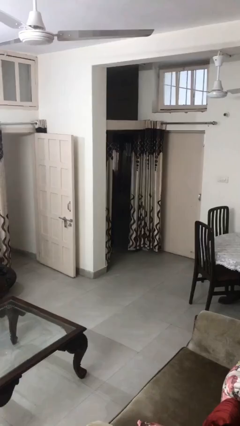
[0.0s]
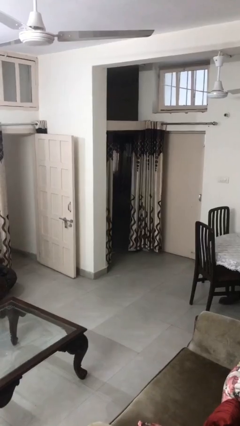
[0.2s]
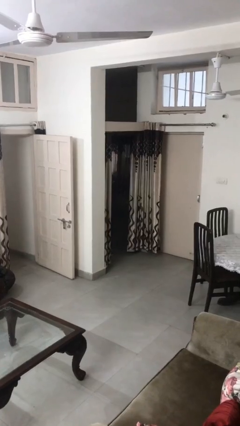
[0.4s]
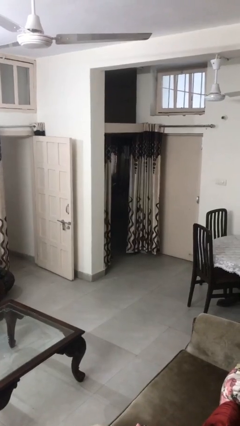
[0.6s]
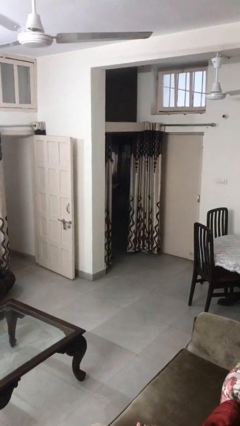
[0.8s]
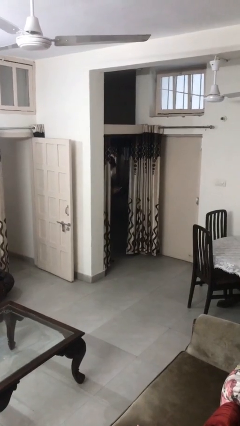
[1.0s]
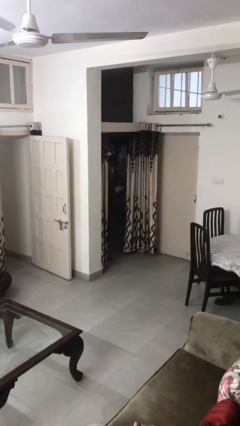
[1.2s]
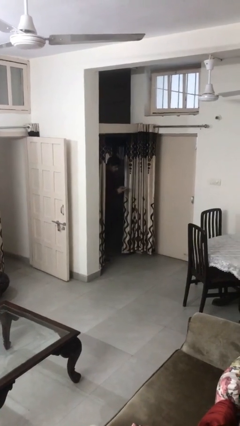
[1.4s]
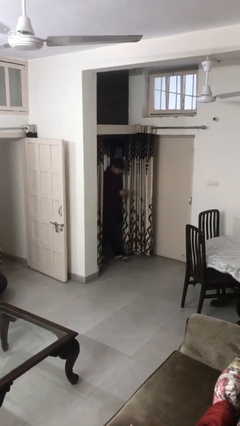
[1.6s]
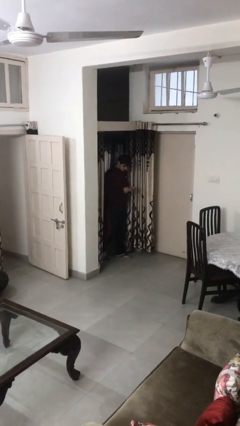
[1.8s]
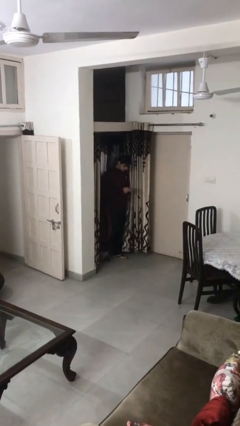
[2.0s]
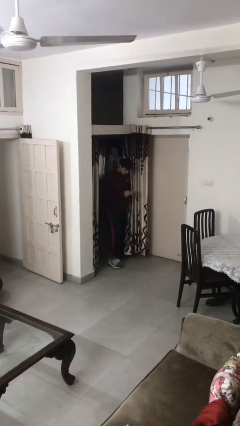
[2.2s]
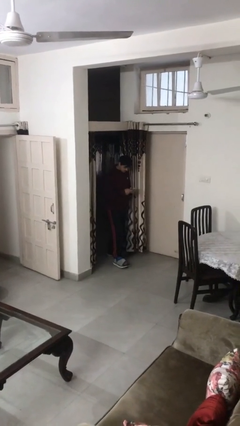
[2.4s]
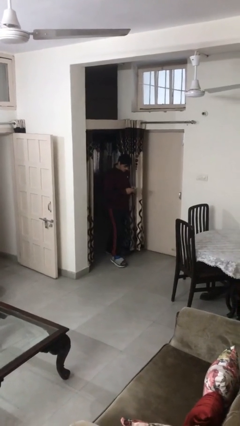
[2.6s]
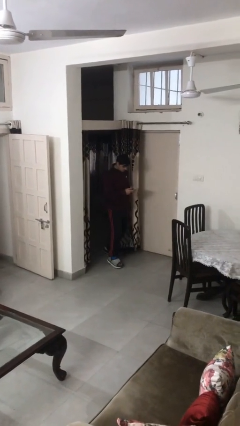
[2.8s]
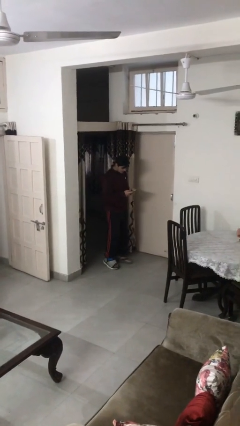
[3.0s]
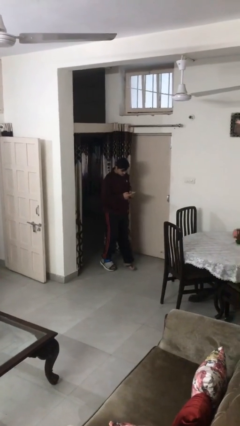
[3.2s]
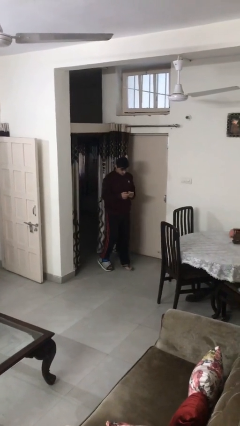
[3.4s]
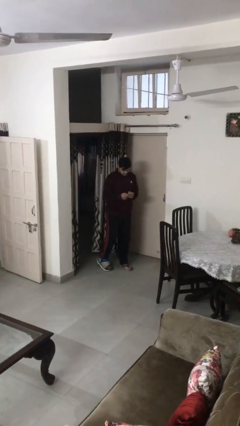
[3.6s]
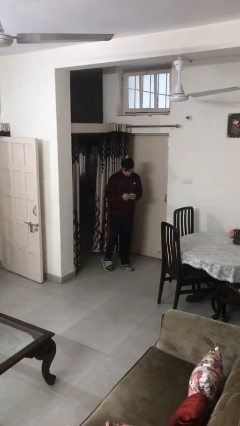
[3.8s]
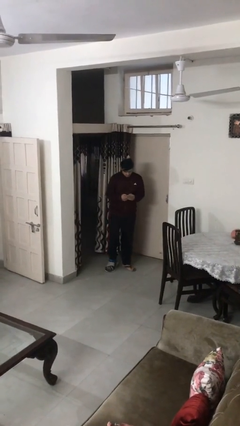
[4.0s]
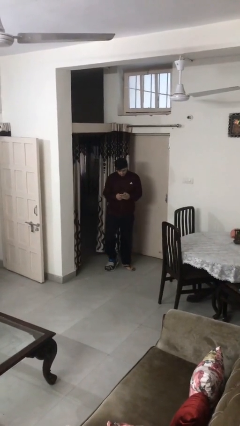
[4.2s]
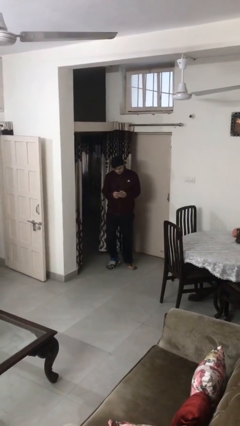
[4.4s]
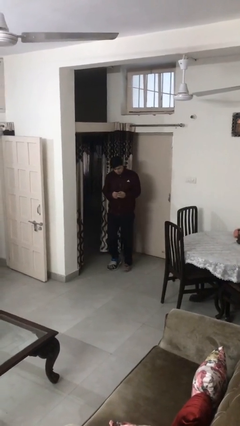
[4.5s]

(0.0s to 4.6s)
person enters scene through structure

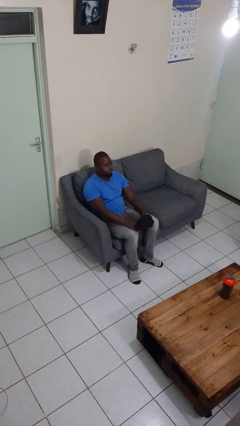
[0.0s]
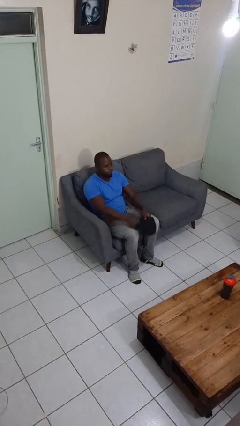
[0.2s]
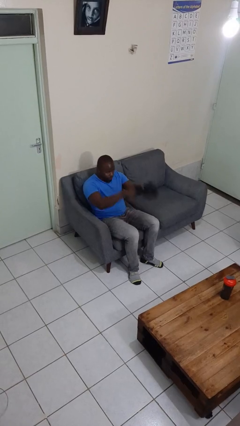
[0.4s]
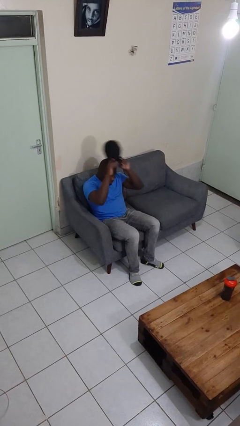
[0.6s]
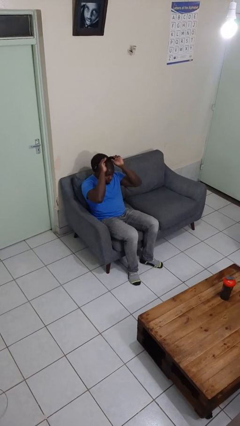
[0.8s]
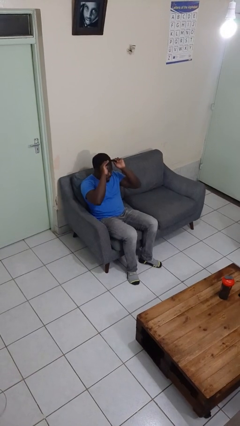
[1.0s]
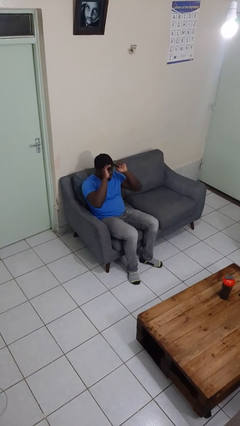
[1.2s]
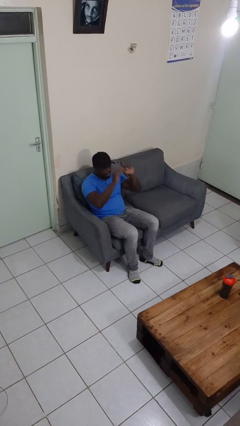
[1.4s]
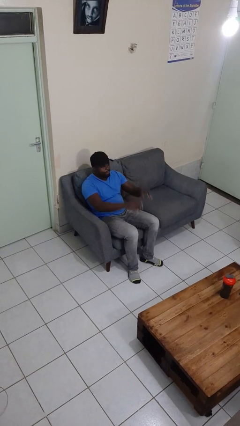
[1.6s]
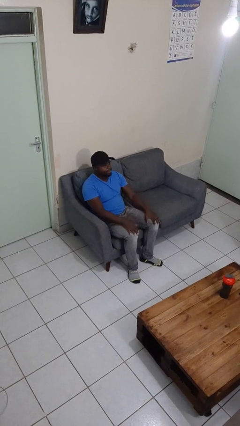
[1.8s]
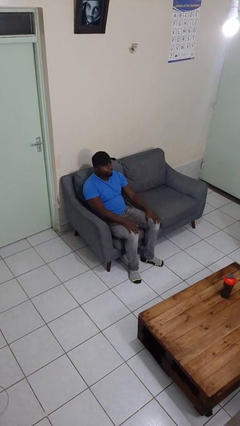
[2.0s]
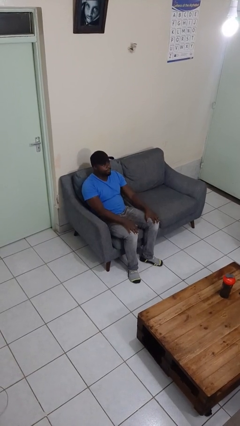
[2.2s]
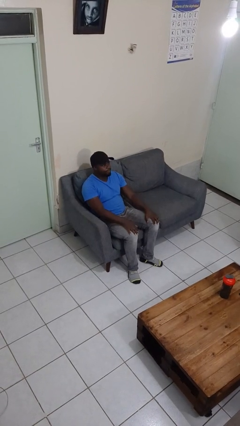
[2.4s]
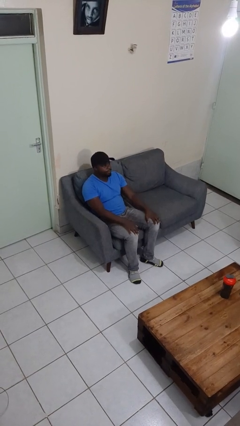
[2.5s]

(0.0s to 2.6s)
person puts on hat

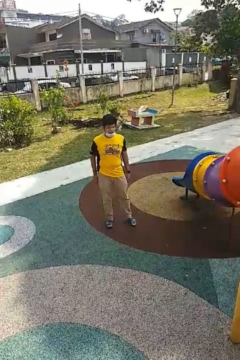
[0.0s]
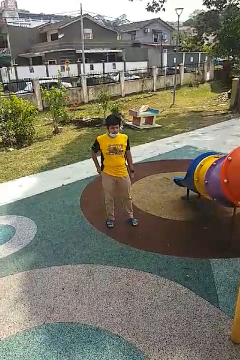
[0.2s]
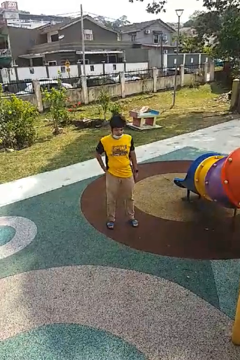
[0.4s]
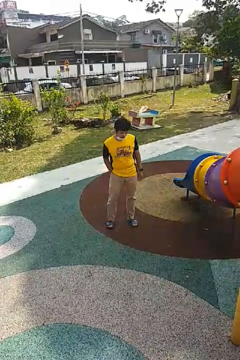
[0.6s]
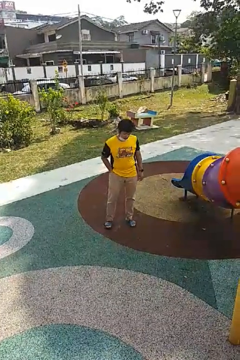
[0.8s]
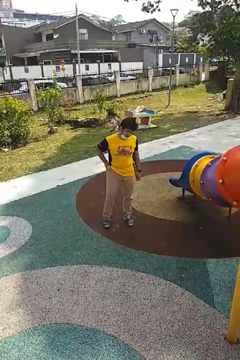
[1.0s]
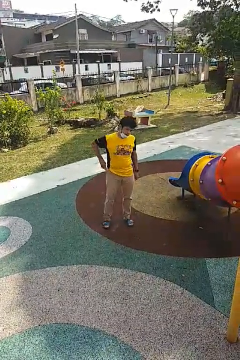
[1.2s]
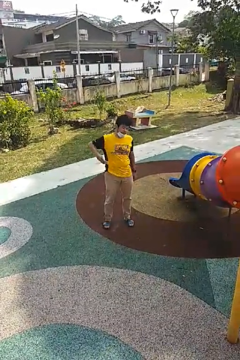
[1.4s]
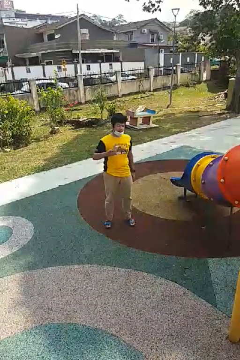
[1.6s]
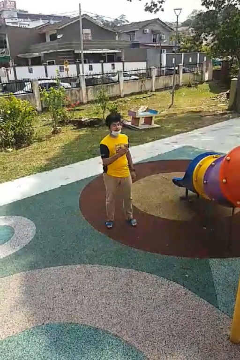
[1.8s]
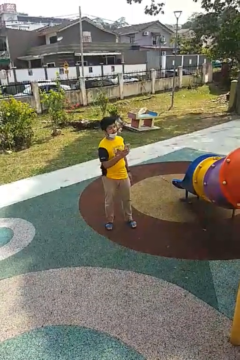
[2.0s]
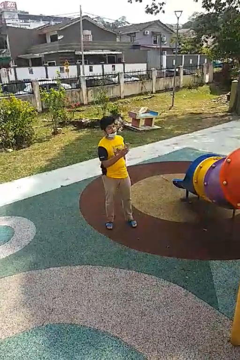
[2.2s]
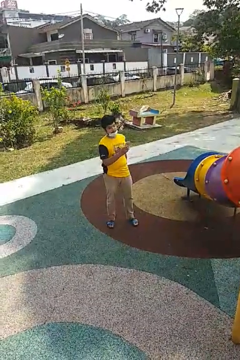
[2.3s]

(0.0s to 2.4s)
person takes phone from pocket

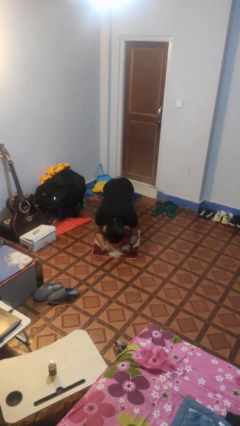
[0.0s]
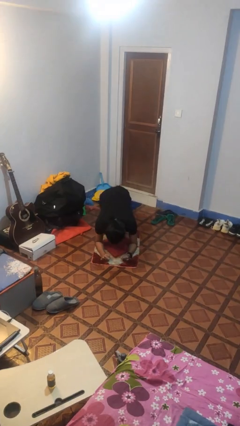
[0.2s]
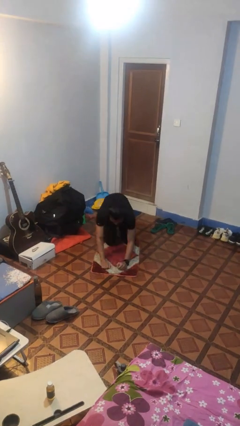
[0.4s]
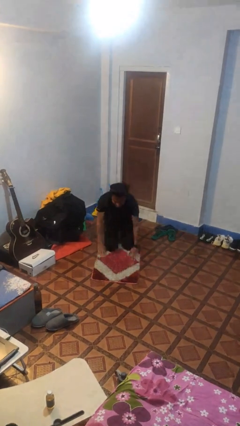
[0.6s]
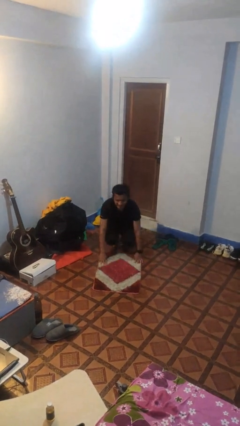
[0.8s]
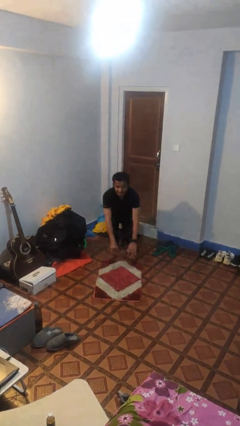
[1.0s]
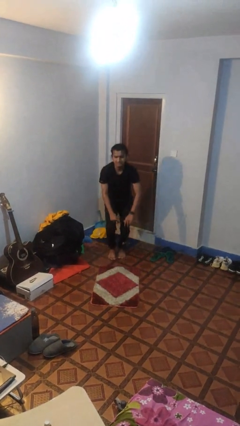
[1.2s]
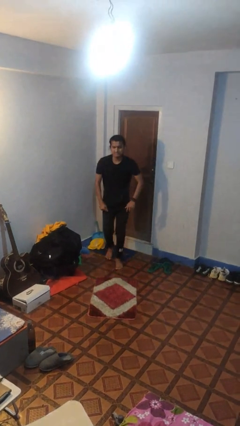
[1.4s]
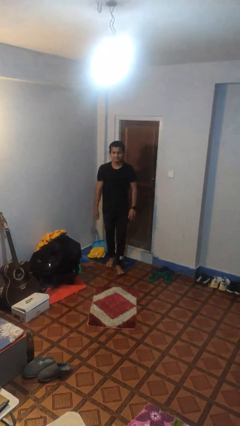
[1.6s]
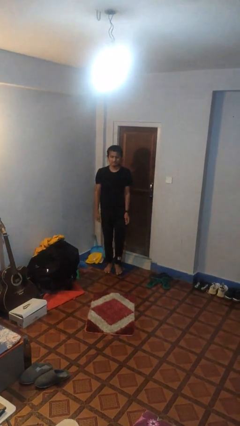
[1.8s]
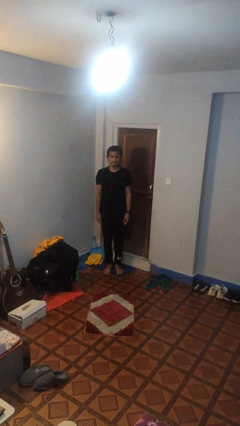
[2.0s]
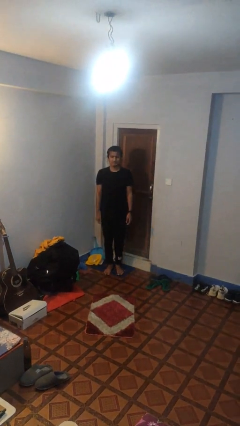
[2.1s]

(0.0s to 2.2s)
person stands up from floor

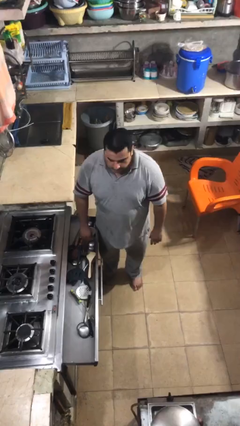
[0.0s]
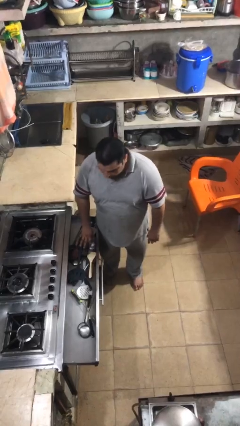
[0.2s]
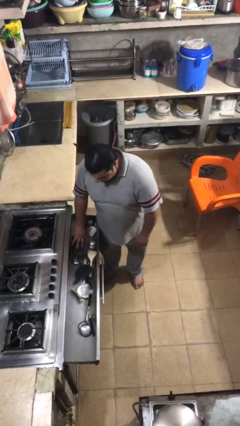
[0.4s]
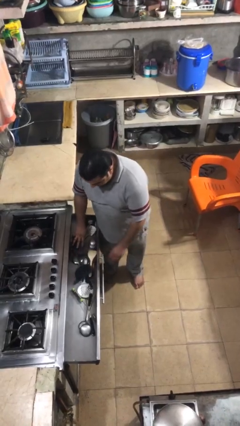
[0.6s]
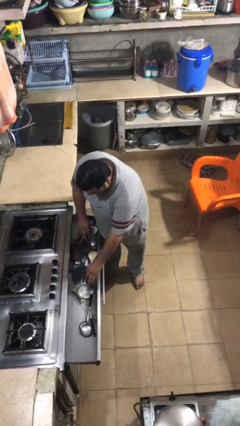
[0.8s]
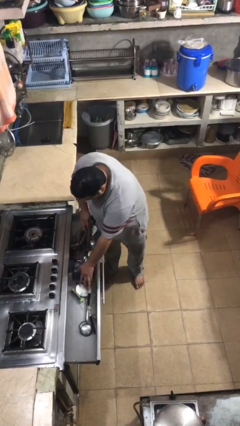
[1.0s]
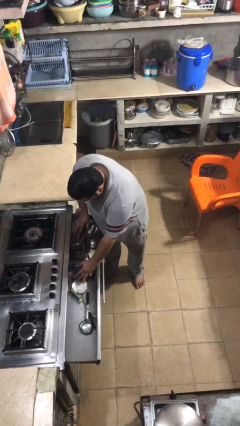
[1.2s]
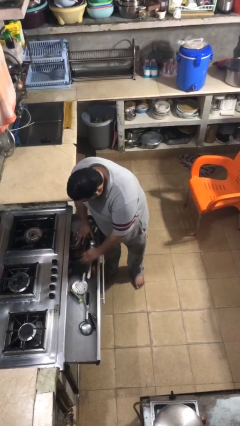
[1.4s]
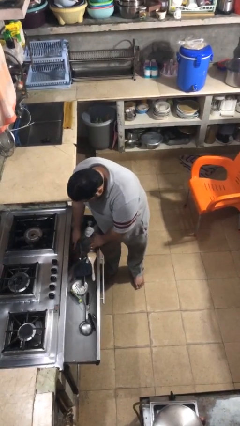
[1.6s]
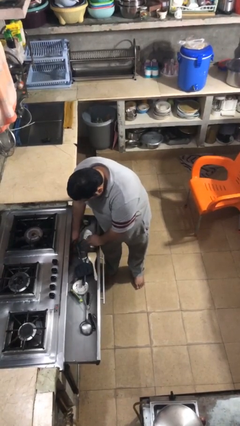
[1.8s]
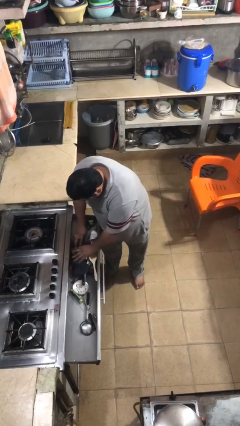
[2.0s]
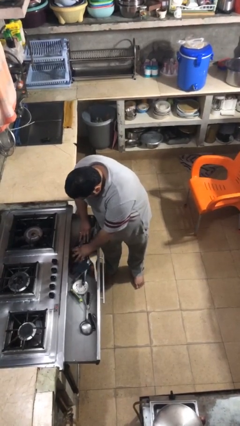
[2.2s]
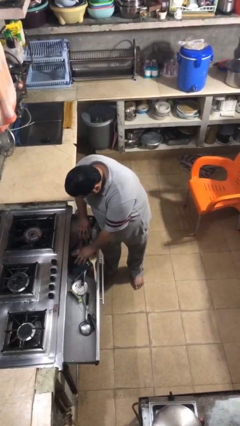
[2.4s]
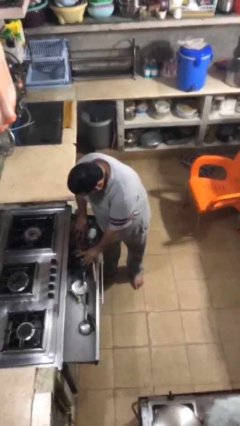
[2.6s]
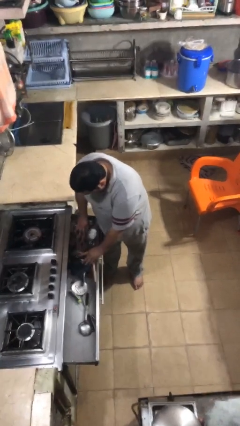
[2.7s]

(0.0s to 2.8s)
person searches in kitchen drawer

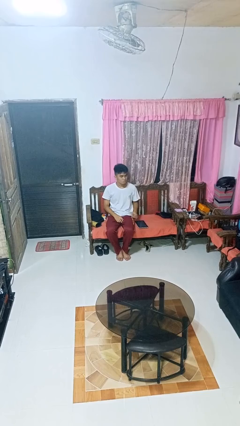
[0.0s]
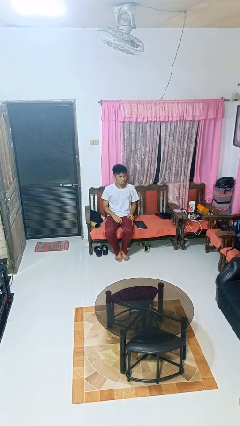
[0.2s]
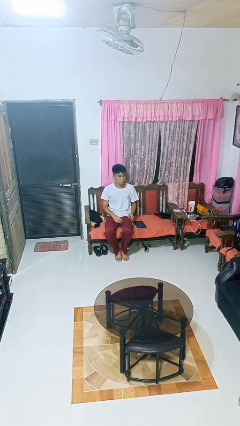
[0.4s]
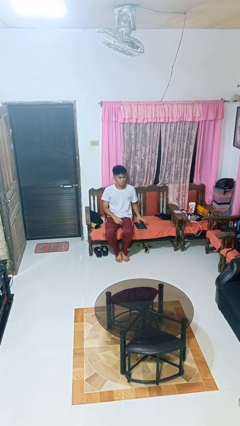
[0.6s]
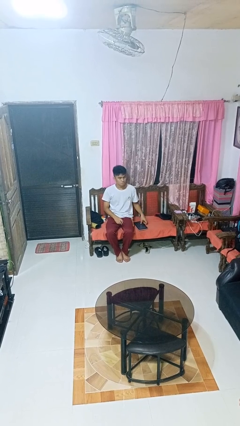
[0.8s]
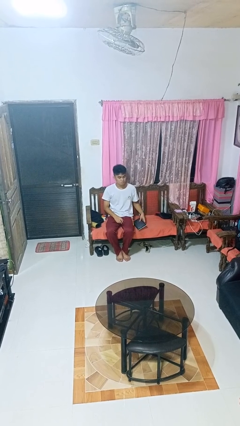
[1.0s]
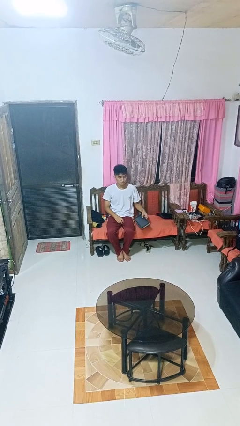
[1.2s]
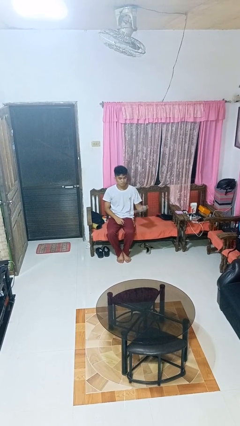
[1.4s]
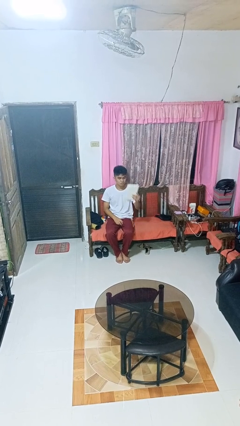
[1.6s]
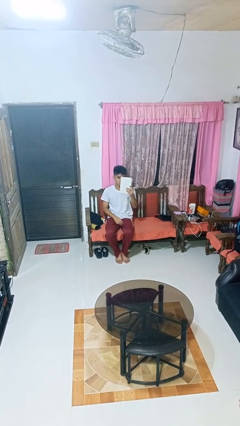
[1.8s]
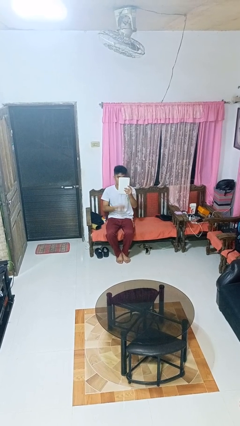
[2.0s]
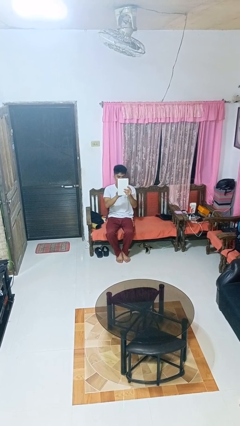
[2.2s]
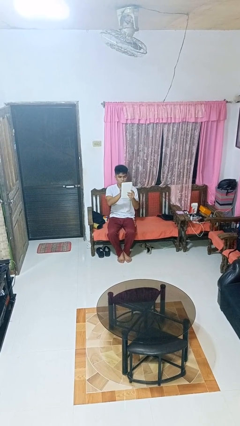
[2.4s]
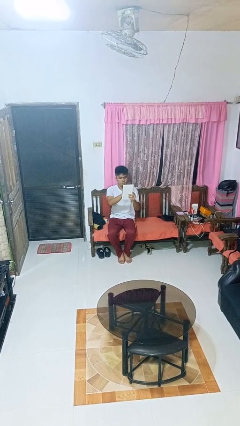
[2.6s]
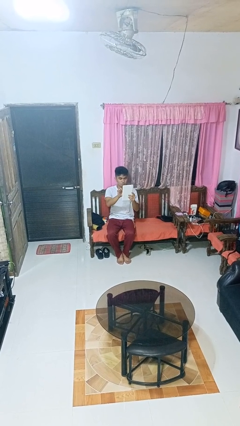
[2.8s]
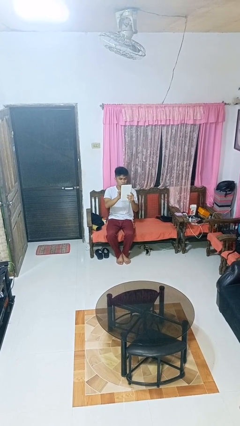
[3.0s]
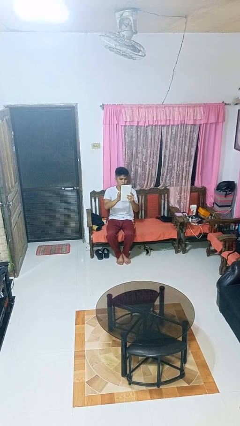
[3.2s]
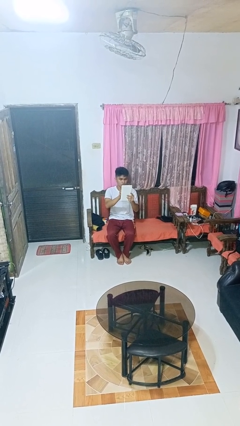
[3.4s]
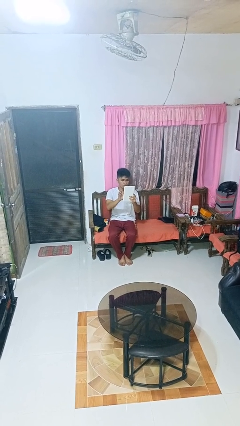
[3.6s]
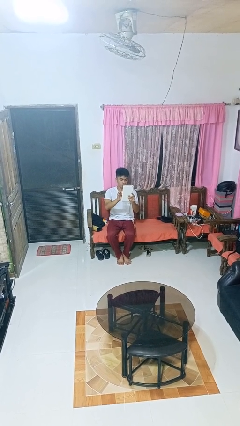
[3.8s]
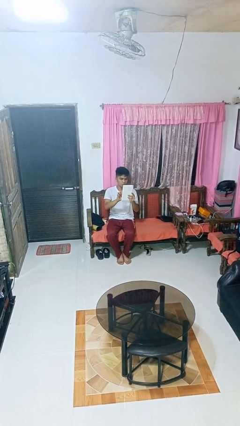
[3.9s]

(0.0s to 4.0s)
person interacts with tablet
